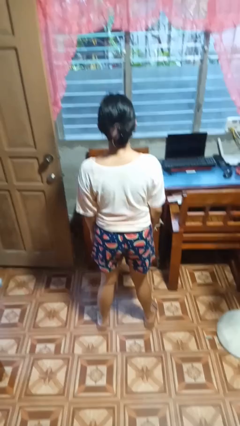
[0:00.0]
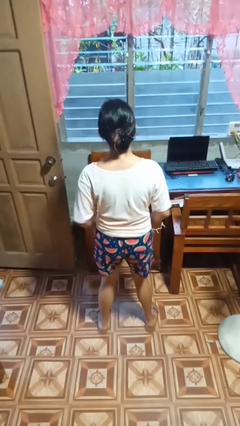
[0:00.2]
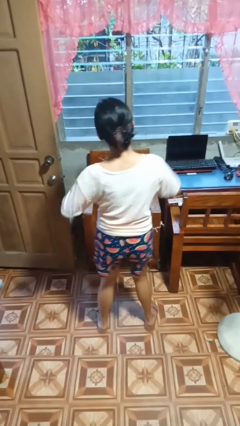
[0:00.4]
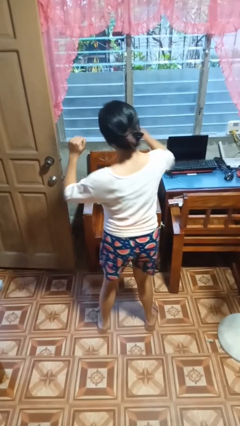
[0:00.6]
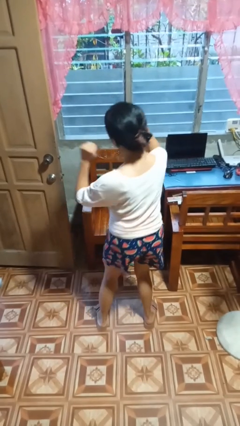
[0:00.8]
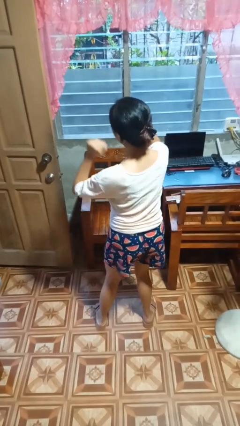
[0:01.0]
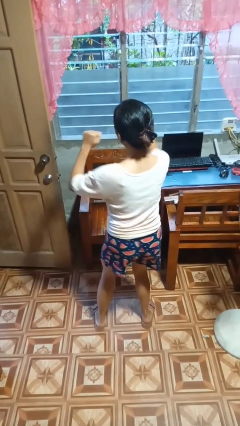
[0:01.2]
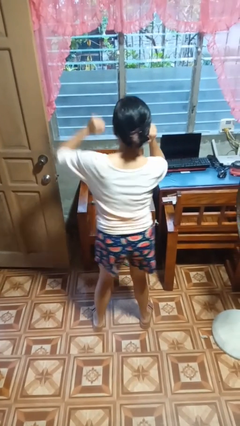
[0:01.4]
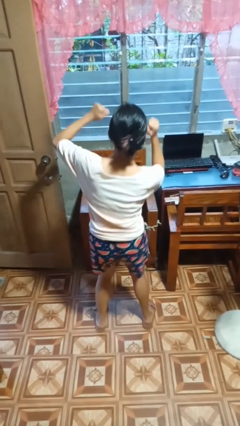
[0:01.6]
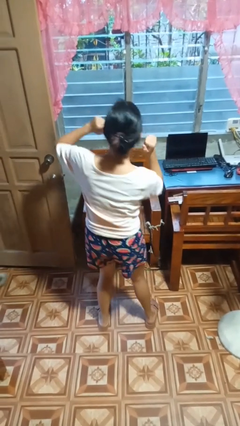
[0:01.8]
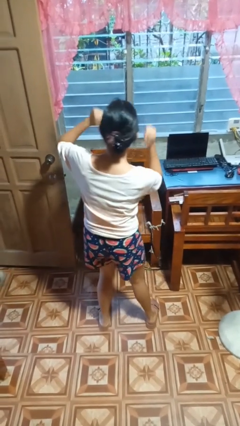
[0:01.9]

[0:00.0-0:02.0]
person dances in place

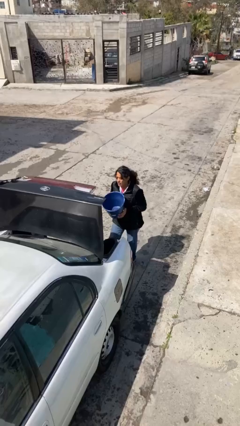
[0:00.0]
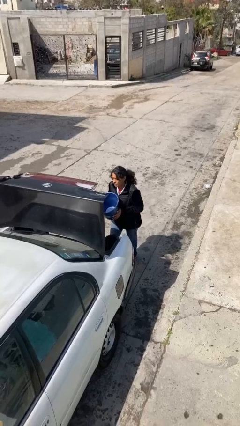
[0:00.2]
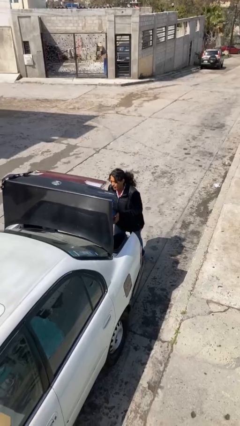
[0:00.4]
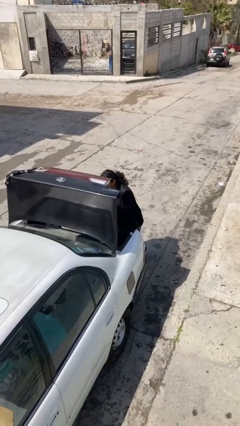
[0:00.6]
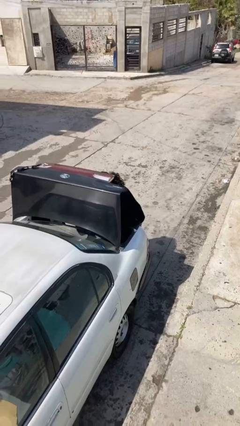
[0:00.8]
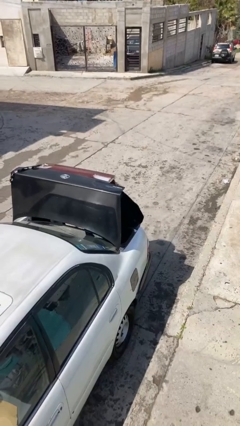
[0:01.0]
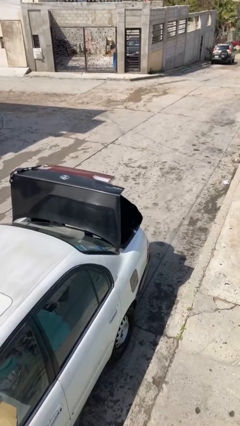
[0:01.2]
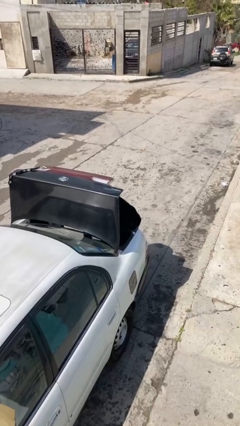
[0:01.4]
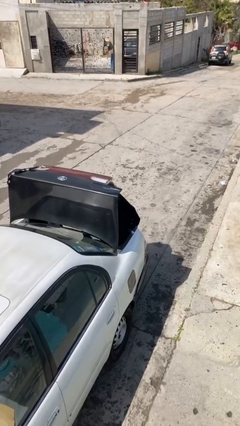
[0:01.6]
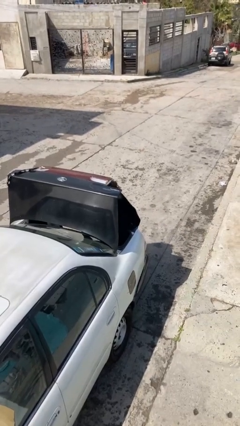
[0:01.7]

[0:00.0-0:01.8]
person loads car

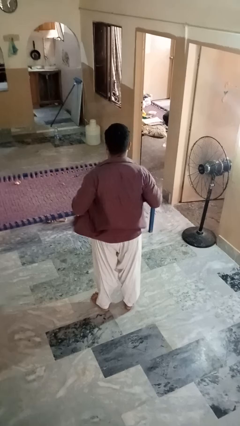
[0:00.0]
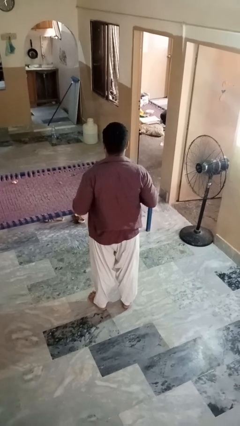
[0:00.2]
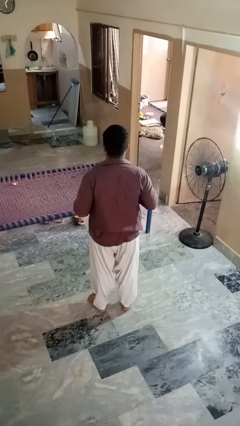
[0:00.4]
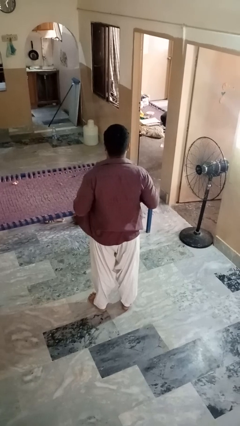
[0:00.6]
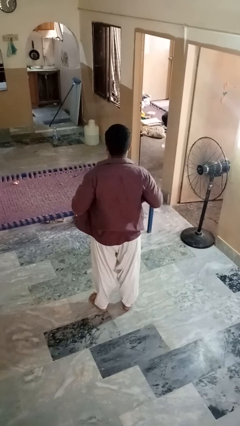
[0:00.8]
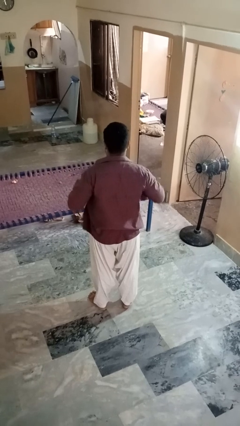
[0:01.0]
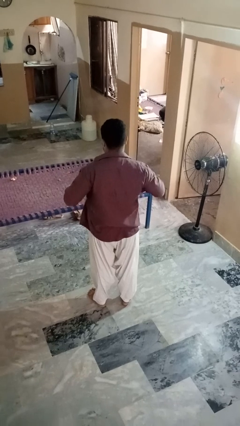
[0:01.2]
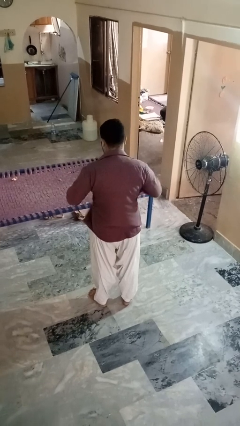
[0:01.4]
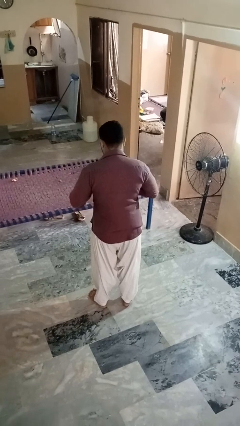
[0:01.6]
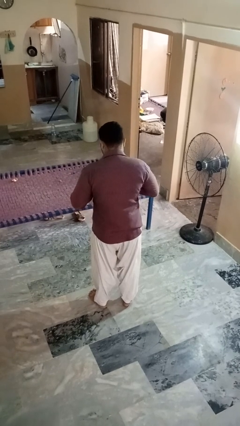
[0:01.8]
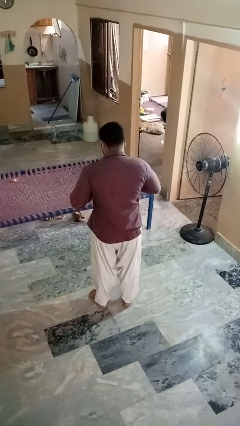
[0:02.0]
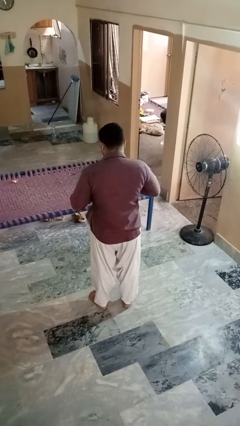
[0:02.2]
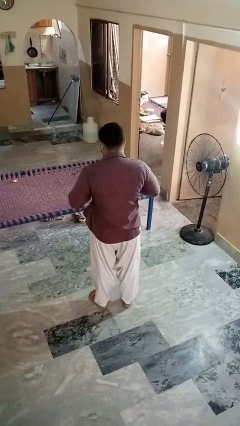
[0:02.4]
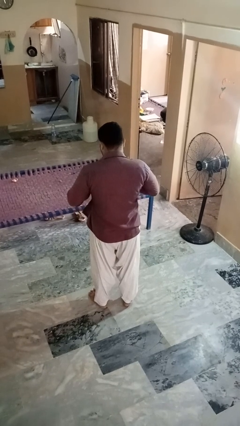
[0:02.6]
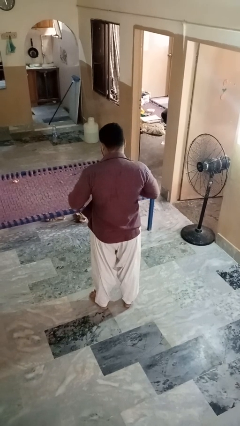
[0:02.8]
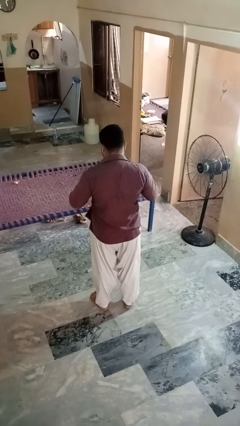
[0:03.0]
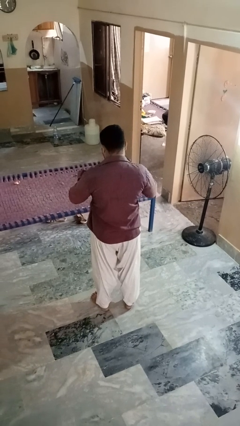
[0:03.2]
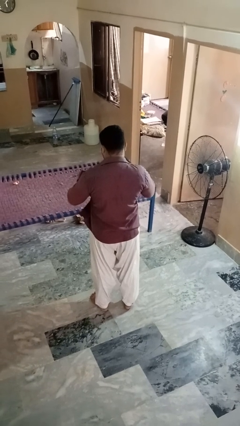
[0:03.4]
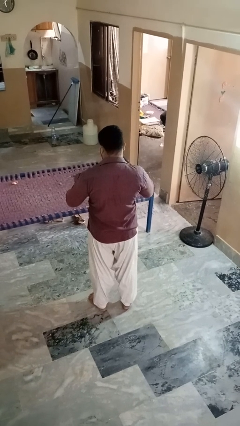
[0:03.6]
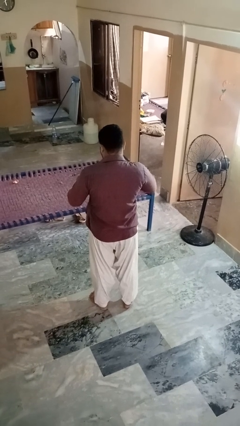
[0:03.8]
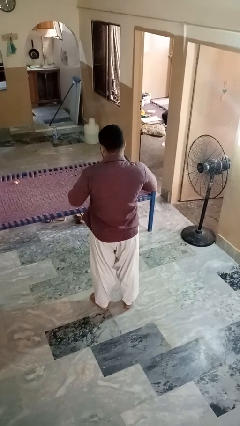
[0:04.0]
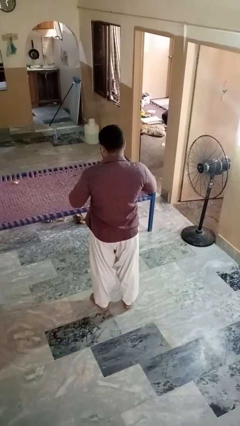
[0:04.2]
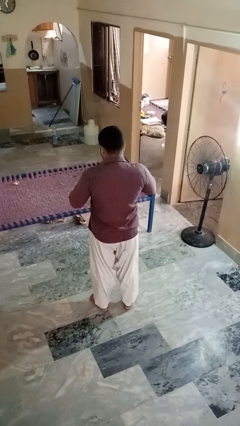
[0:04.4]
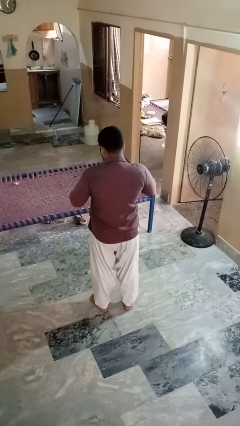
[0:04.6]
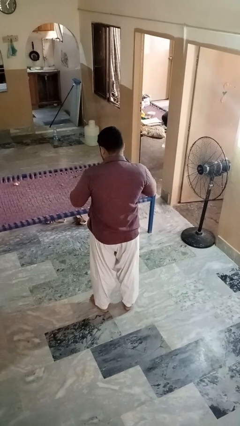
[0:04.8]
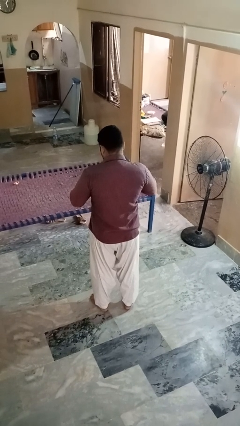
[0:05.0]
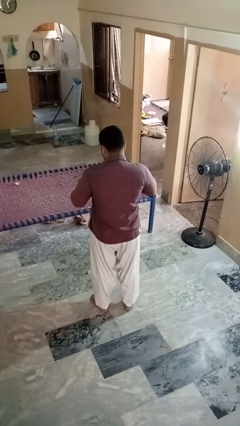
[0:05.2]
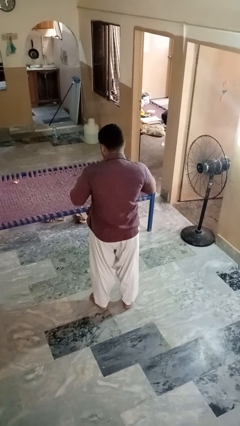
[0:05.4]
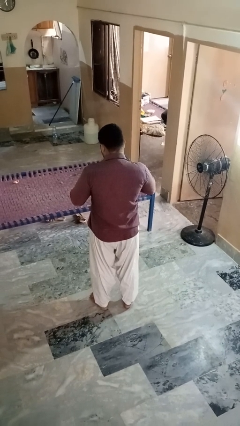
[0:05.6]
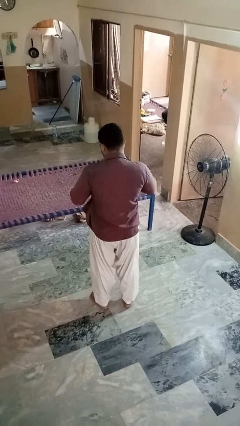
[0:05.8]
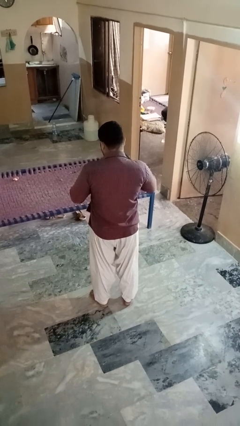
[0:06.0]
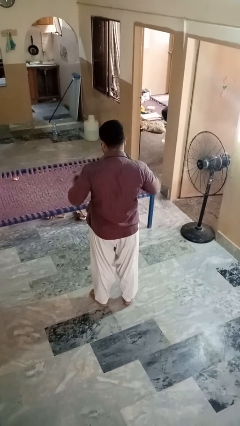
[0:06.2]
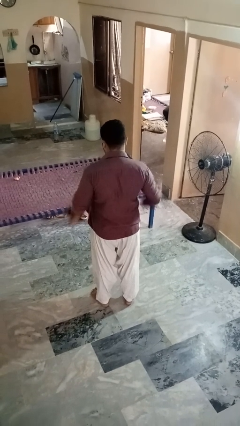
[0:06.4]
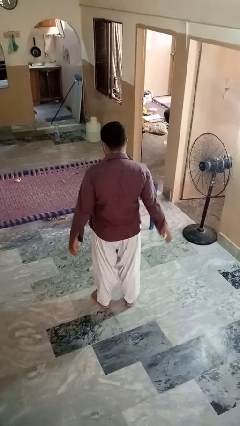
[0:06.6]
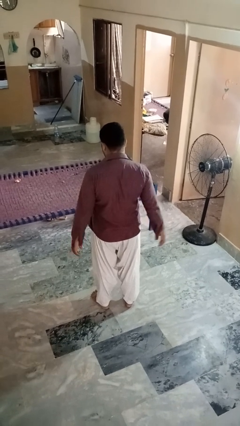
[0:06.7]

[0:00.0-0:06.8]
person buttons shirt

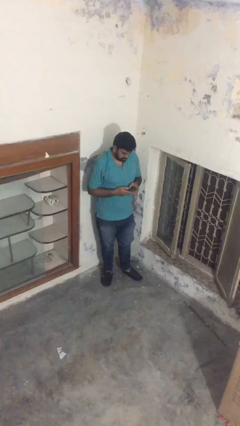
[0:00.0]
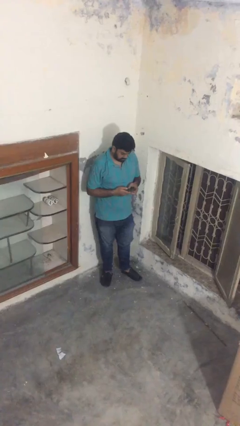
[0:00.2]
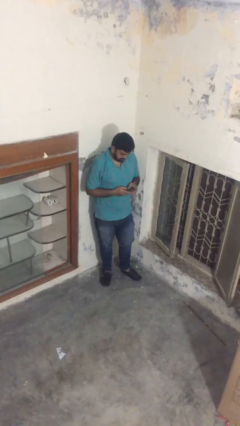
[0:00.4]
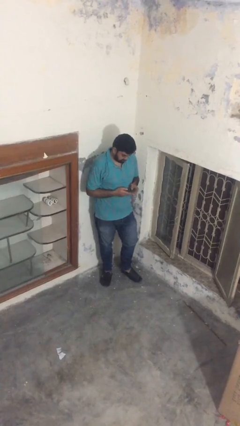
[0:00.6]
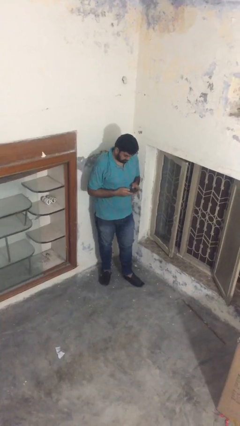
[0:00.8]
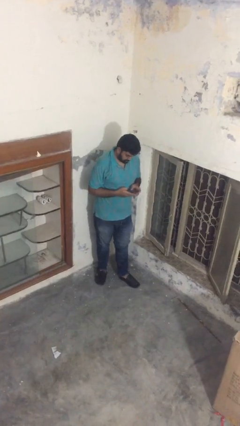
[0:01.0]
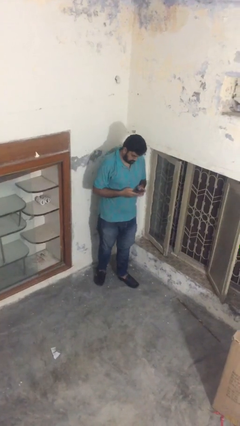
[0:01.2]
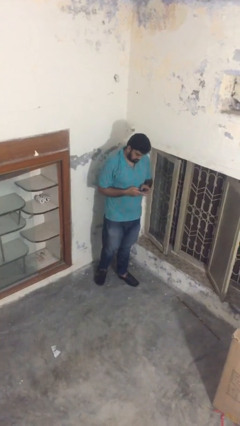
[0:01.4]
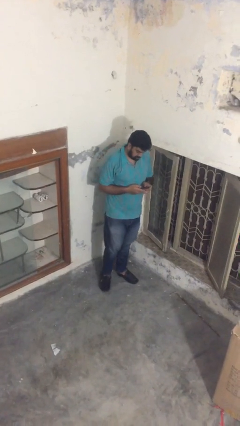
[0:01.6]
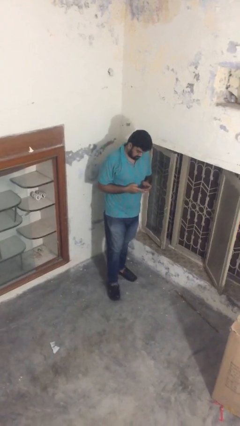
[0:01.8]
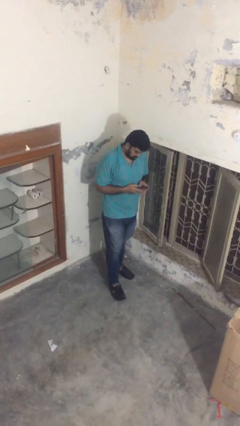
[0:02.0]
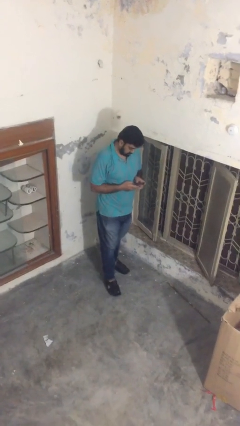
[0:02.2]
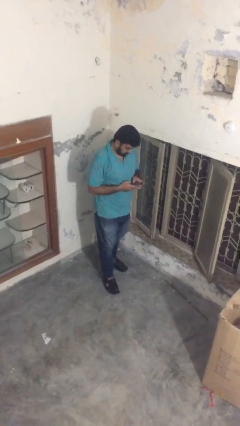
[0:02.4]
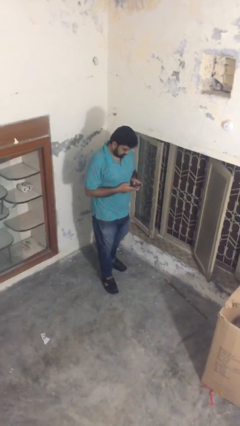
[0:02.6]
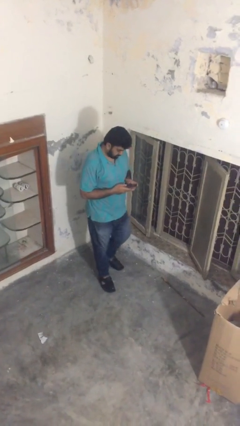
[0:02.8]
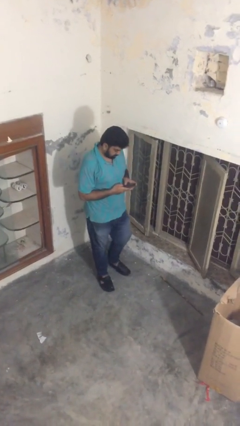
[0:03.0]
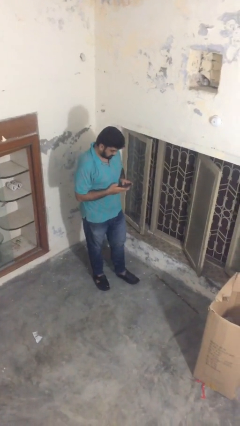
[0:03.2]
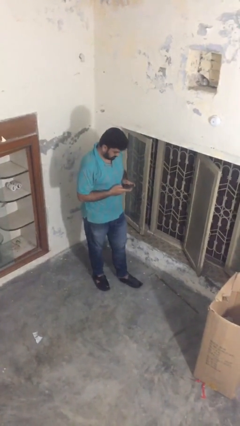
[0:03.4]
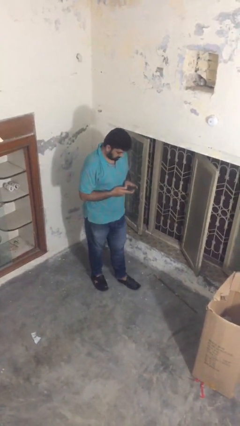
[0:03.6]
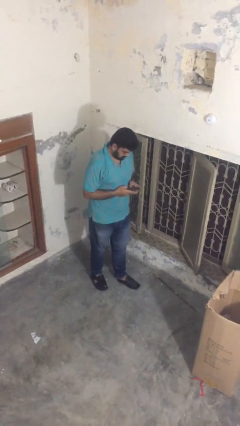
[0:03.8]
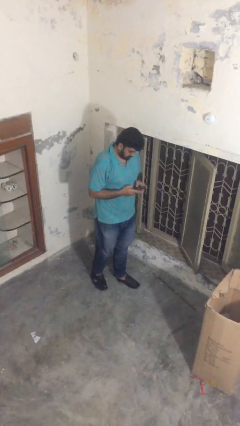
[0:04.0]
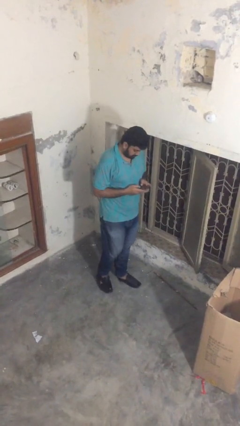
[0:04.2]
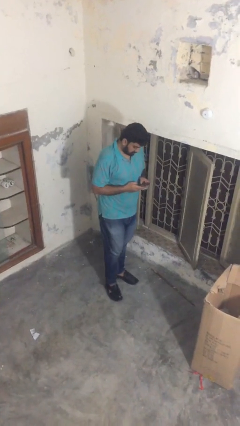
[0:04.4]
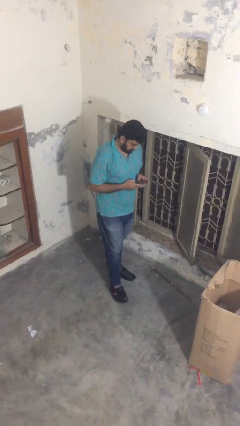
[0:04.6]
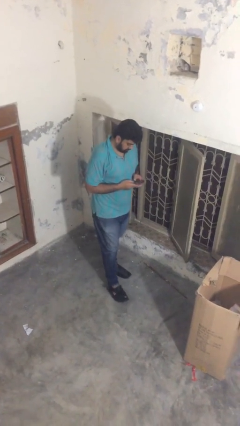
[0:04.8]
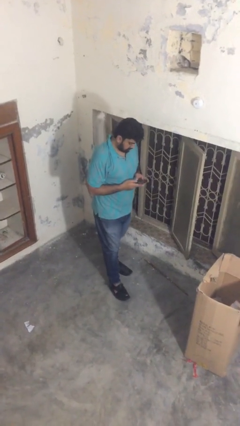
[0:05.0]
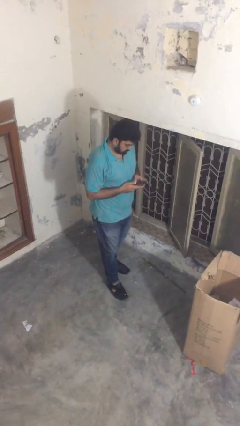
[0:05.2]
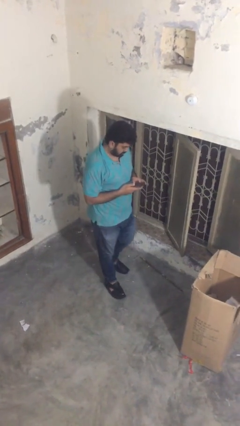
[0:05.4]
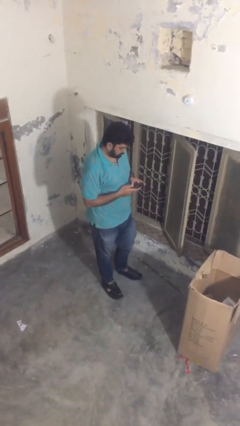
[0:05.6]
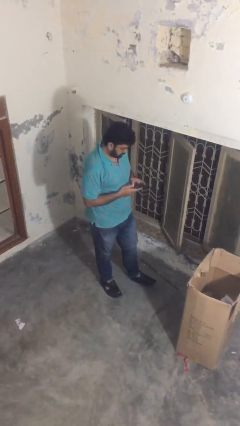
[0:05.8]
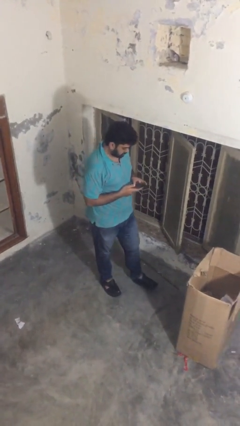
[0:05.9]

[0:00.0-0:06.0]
person texts on phone

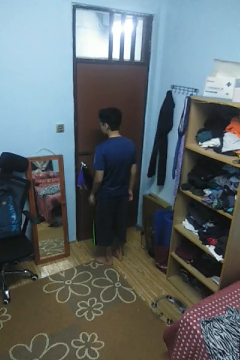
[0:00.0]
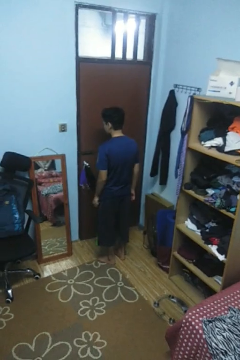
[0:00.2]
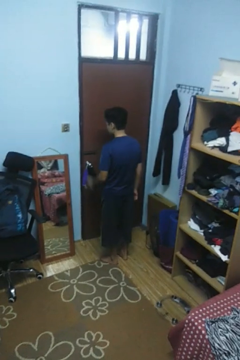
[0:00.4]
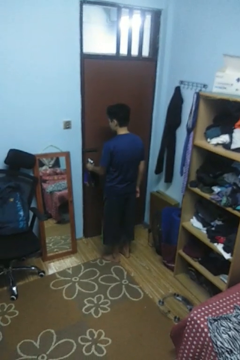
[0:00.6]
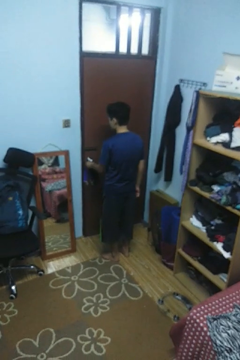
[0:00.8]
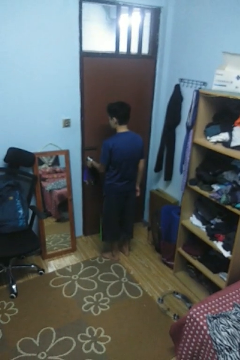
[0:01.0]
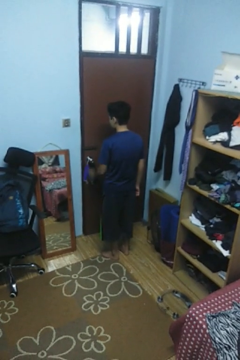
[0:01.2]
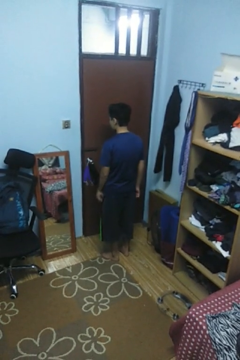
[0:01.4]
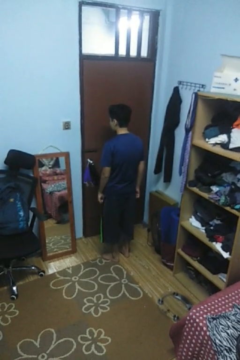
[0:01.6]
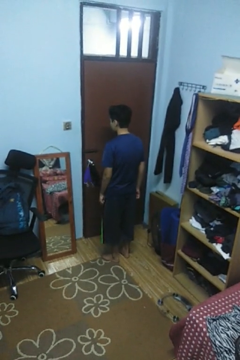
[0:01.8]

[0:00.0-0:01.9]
person locks door with keys
